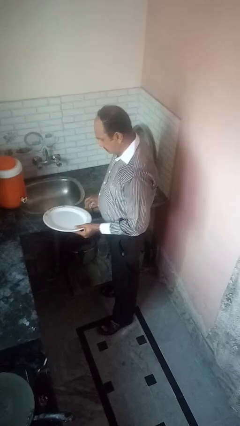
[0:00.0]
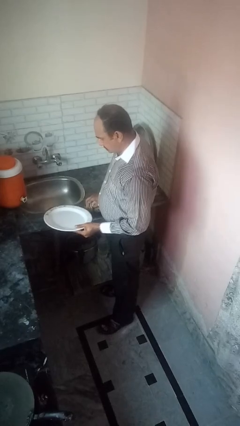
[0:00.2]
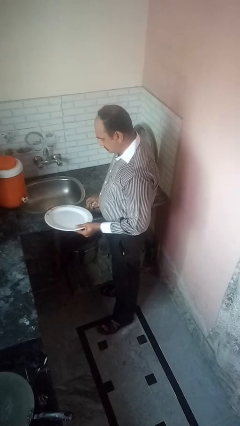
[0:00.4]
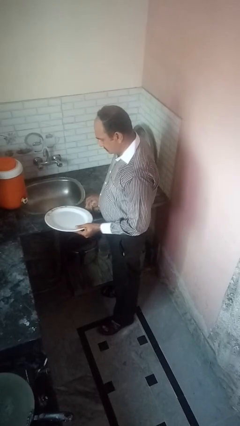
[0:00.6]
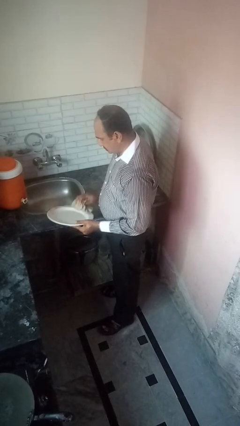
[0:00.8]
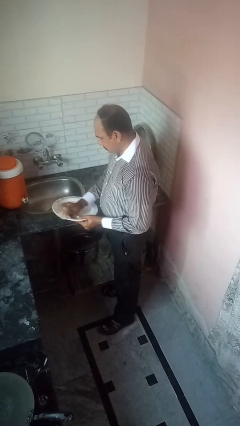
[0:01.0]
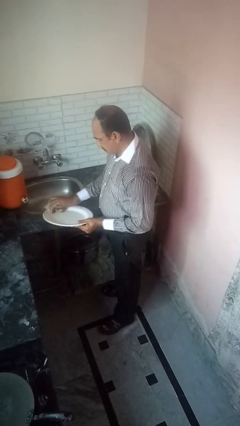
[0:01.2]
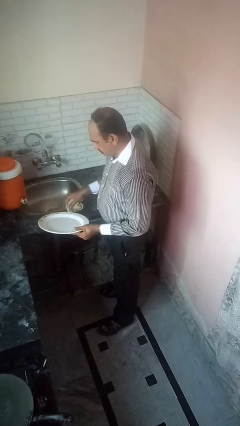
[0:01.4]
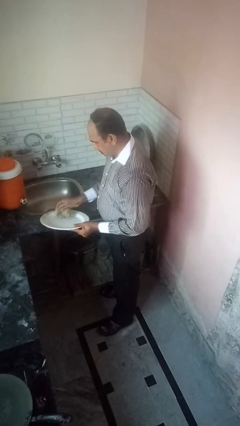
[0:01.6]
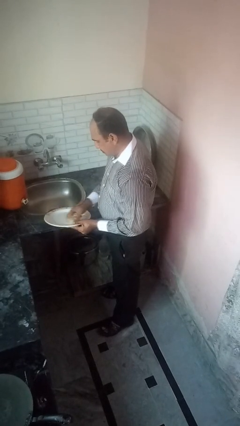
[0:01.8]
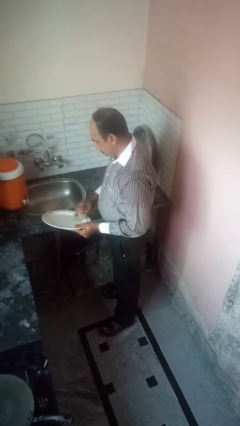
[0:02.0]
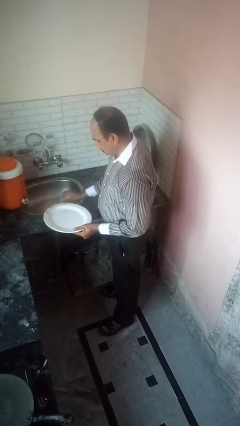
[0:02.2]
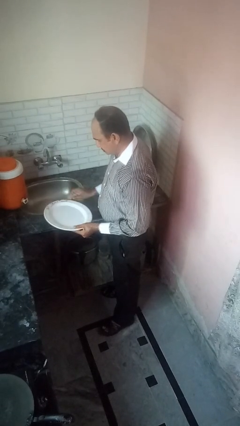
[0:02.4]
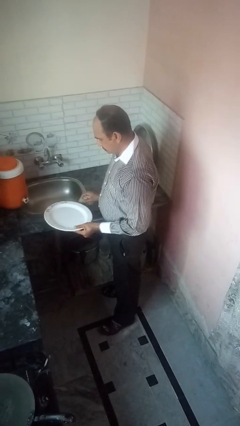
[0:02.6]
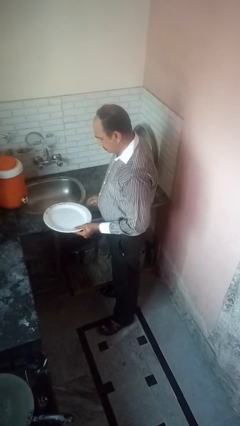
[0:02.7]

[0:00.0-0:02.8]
person dries dish

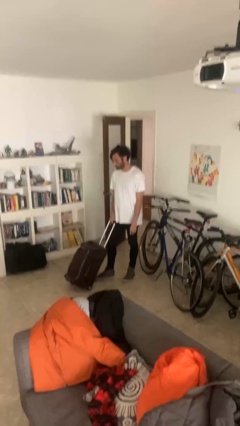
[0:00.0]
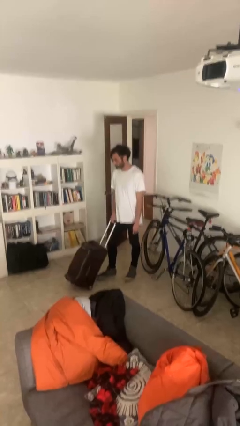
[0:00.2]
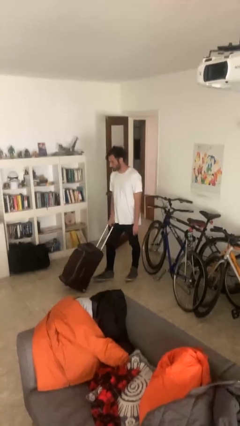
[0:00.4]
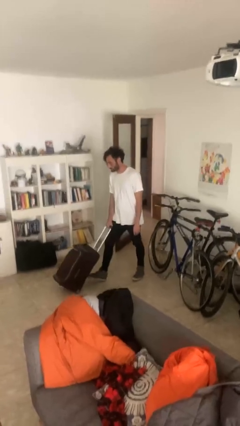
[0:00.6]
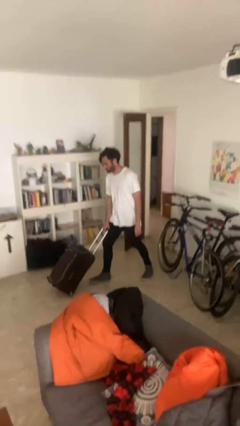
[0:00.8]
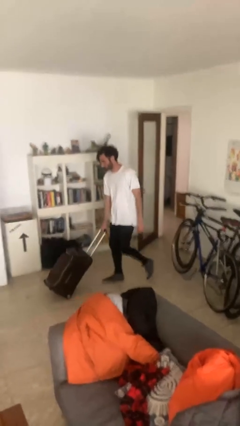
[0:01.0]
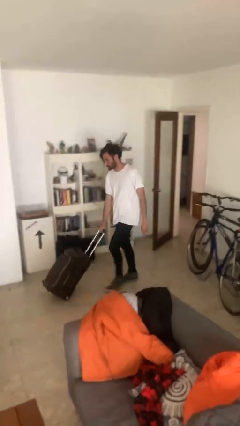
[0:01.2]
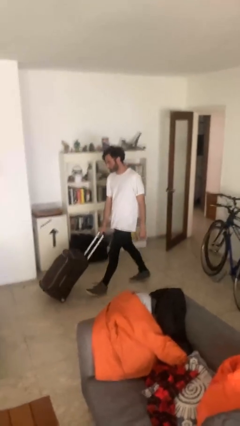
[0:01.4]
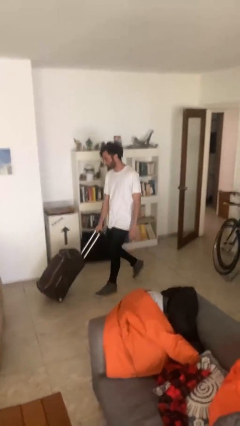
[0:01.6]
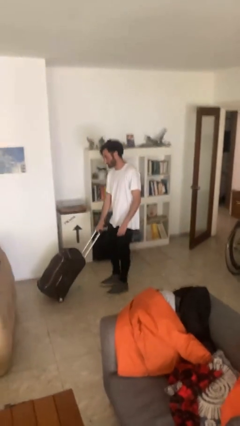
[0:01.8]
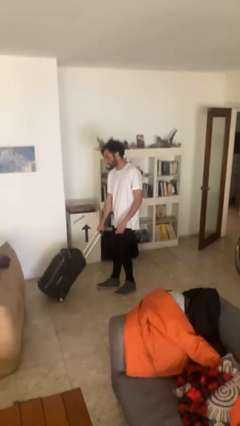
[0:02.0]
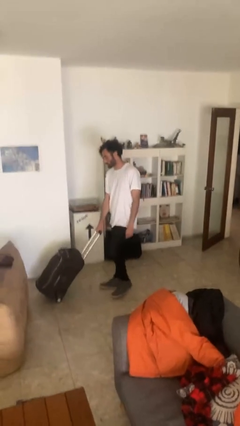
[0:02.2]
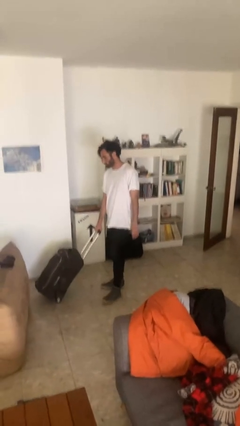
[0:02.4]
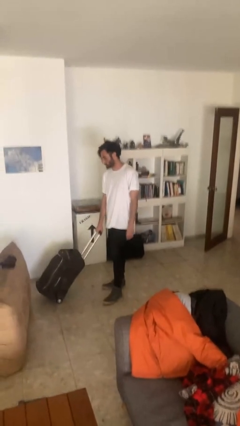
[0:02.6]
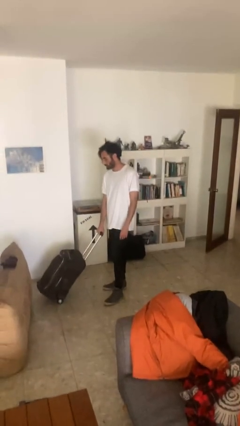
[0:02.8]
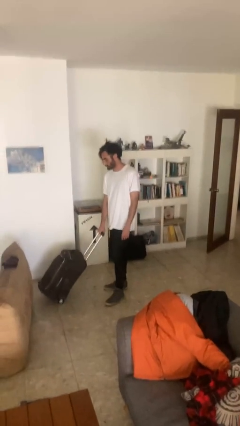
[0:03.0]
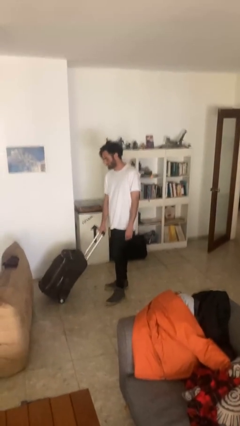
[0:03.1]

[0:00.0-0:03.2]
person pushes wheeled cart

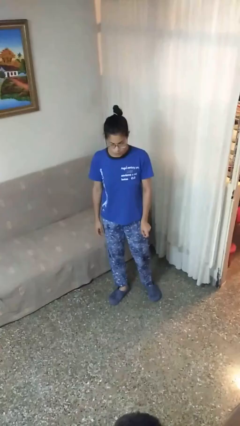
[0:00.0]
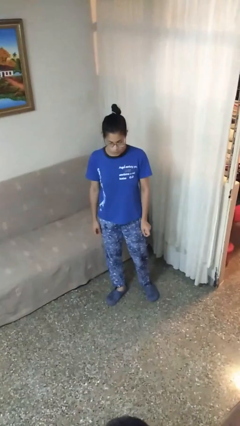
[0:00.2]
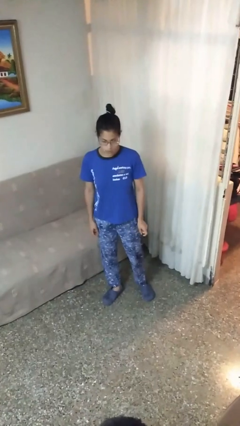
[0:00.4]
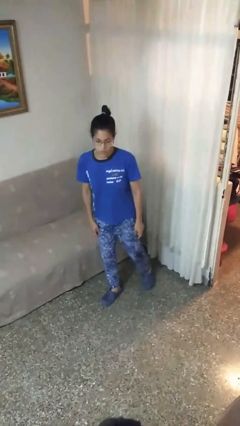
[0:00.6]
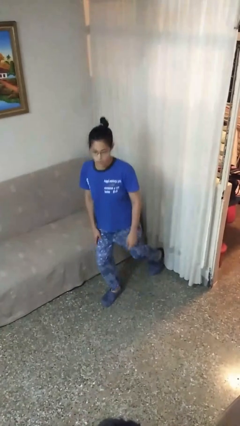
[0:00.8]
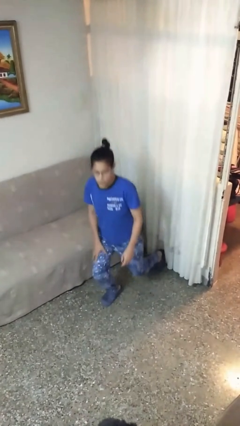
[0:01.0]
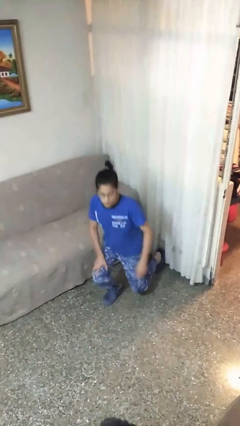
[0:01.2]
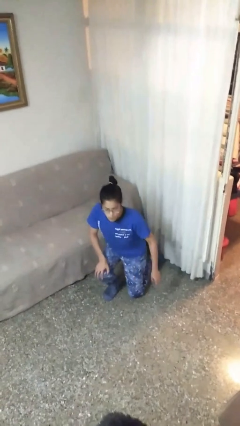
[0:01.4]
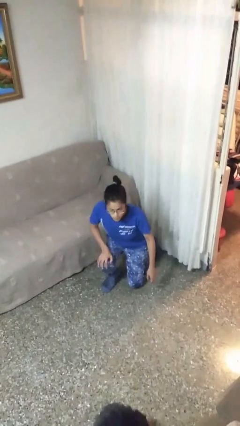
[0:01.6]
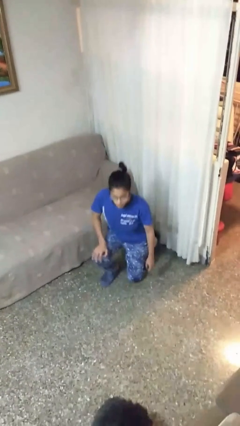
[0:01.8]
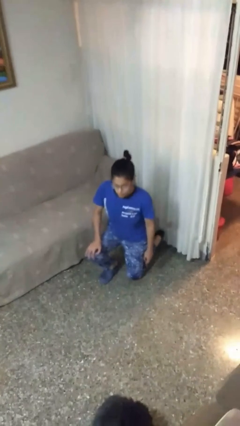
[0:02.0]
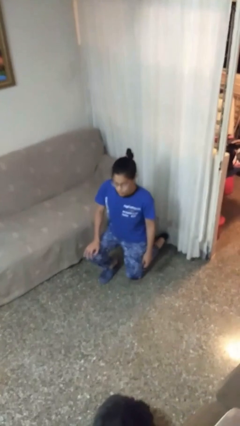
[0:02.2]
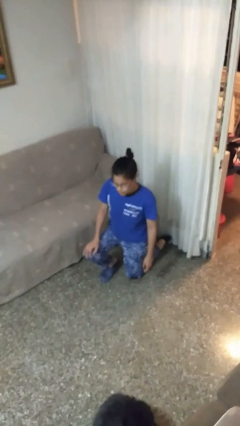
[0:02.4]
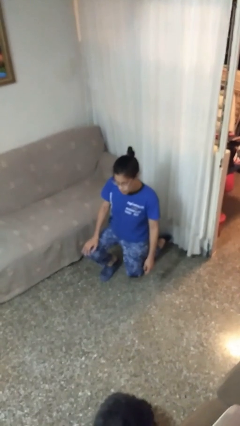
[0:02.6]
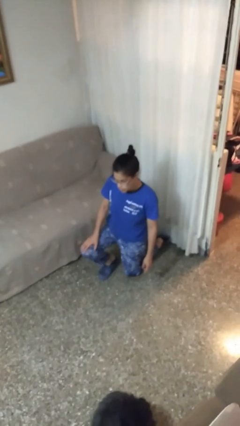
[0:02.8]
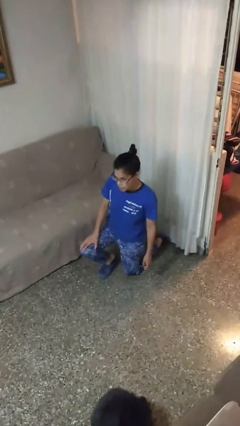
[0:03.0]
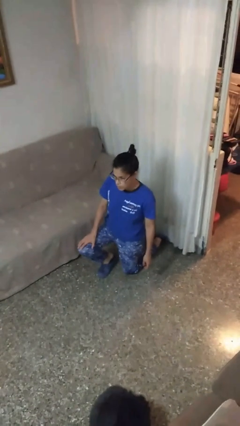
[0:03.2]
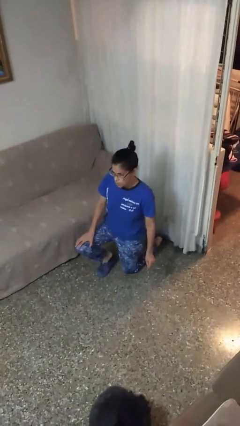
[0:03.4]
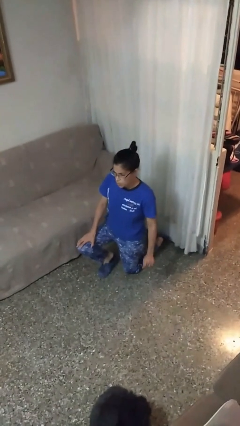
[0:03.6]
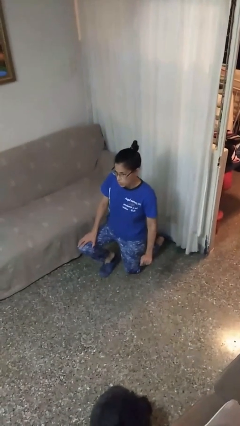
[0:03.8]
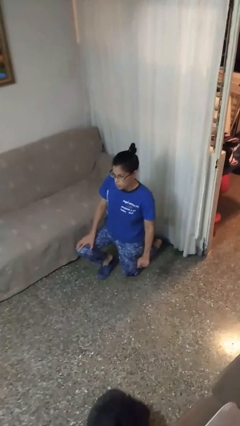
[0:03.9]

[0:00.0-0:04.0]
person kneels

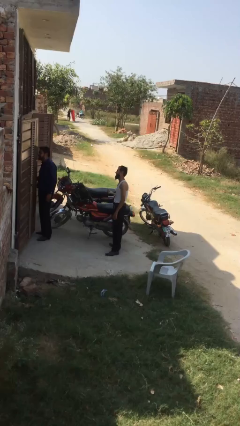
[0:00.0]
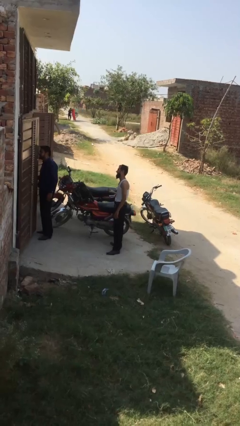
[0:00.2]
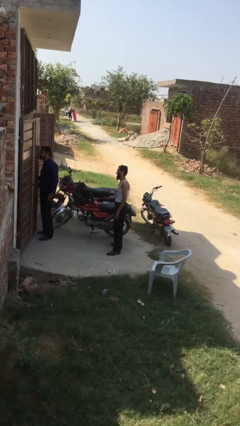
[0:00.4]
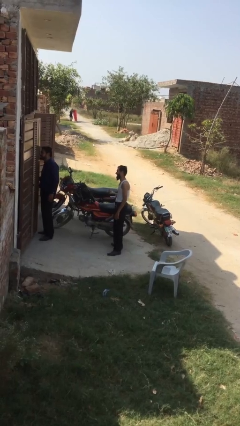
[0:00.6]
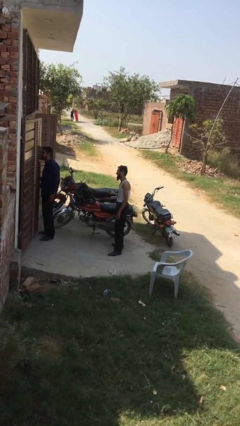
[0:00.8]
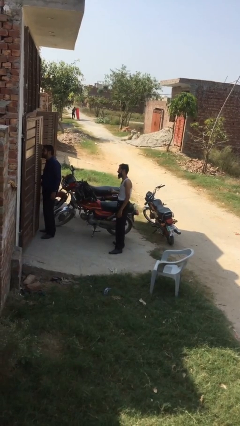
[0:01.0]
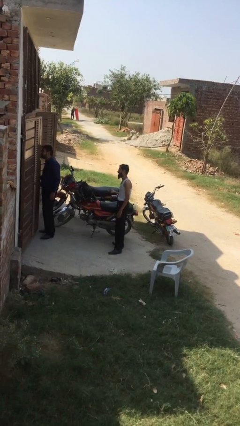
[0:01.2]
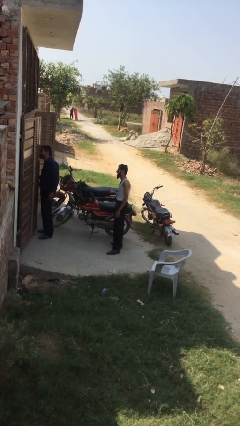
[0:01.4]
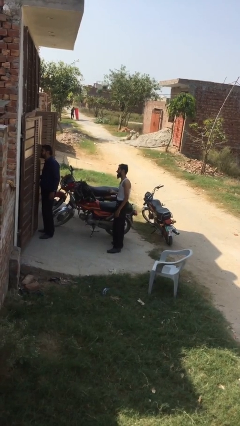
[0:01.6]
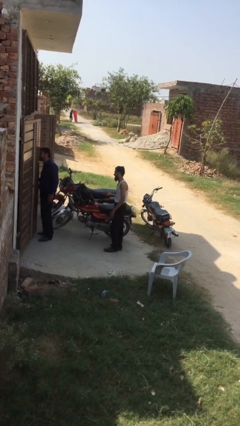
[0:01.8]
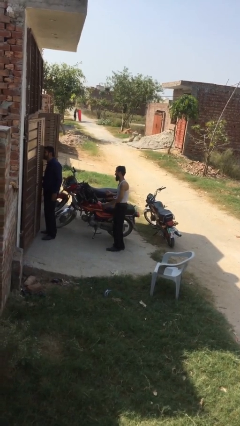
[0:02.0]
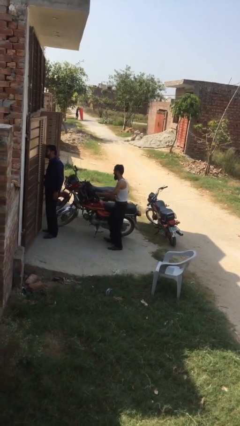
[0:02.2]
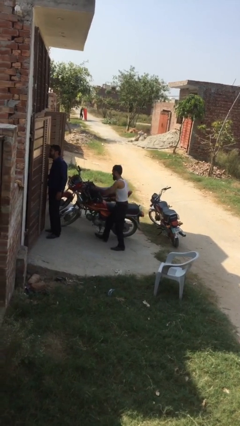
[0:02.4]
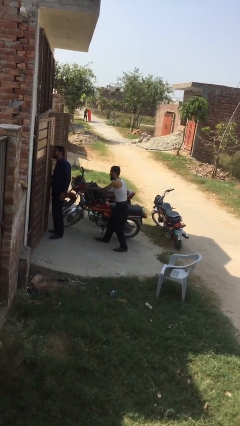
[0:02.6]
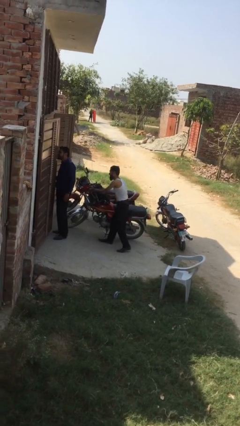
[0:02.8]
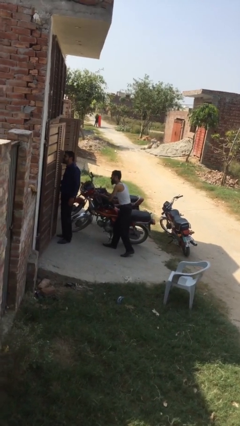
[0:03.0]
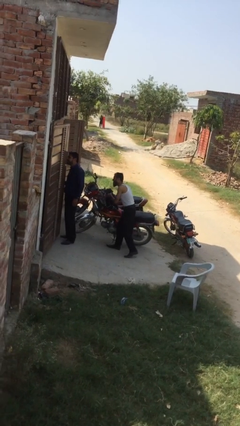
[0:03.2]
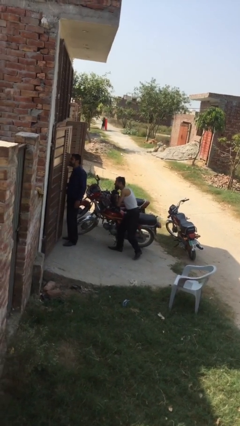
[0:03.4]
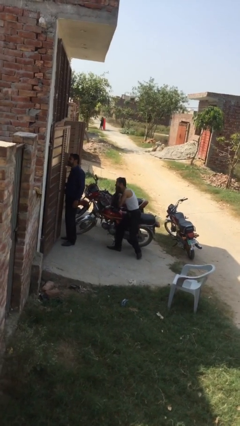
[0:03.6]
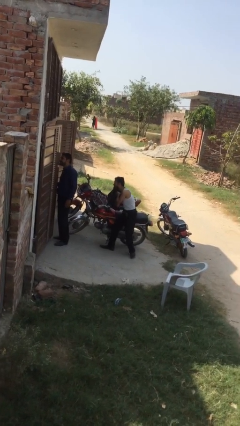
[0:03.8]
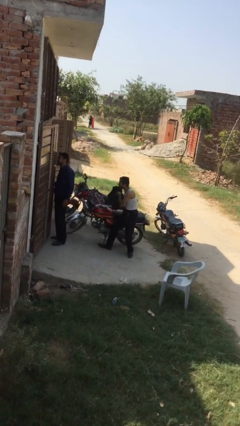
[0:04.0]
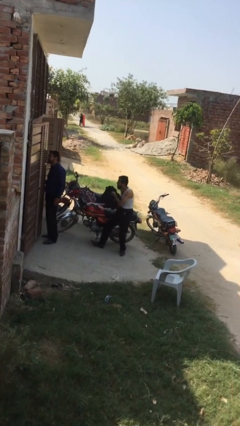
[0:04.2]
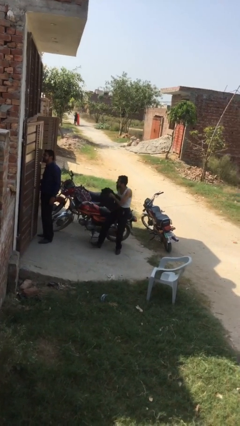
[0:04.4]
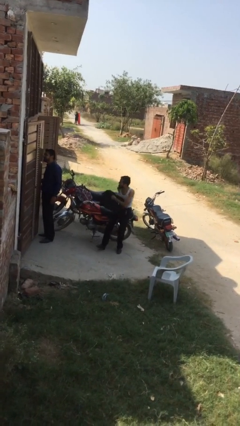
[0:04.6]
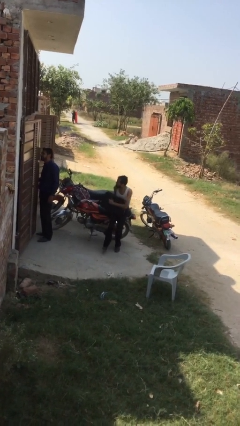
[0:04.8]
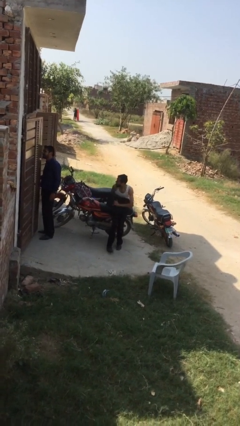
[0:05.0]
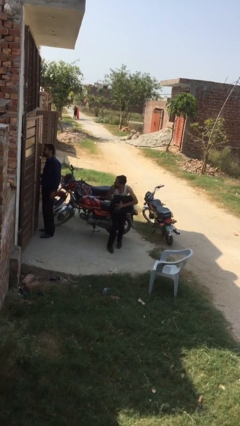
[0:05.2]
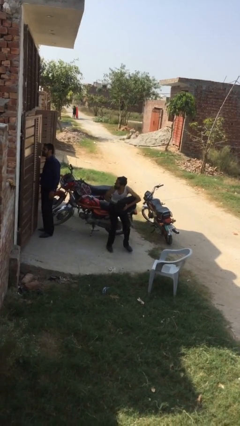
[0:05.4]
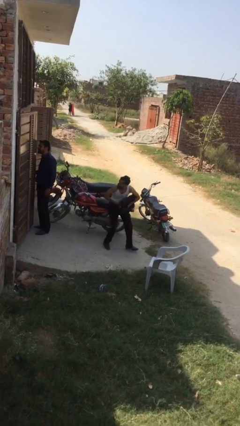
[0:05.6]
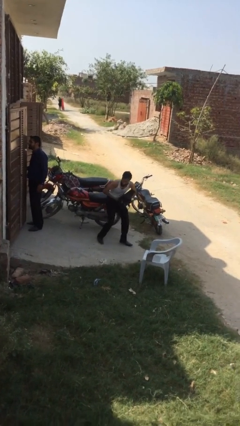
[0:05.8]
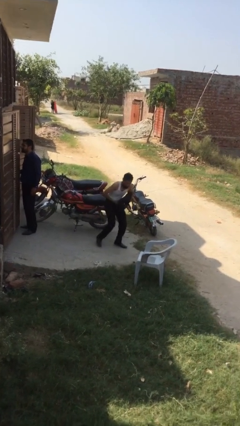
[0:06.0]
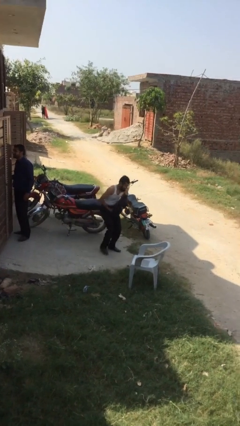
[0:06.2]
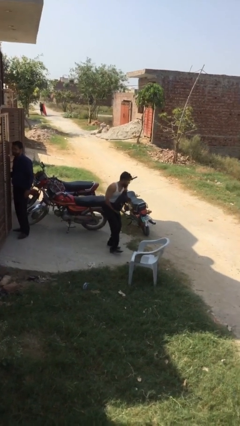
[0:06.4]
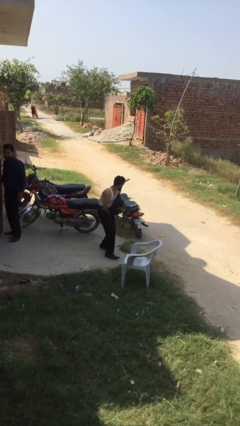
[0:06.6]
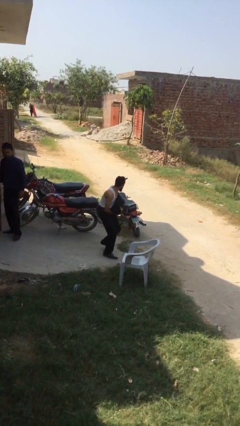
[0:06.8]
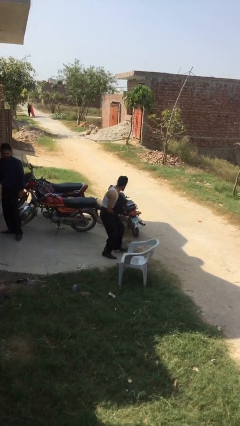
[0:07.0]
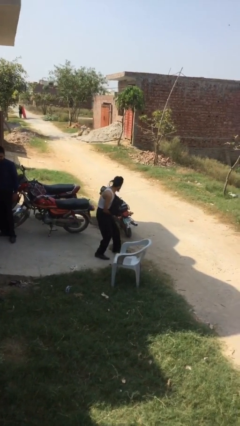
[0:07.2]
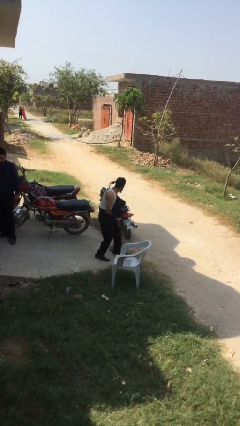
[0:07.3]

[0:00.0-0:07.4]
person steals object from person
